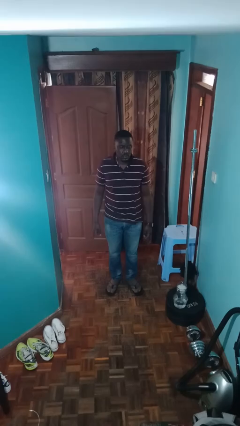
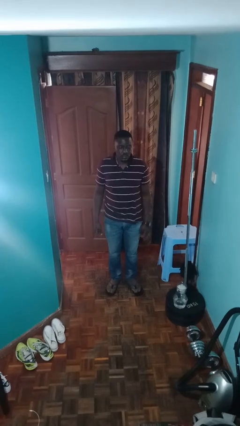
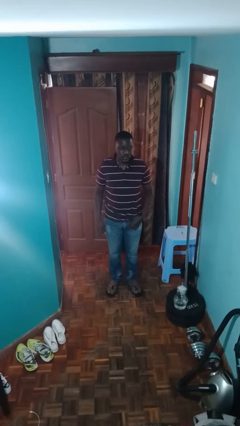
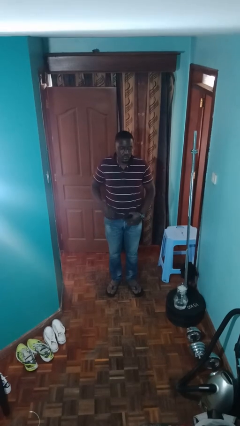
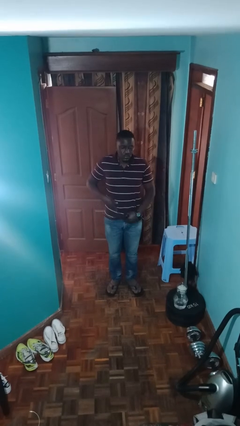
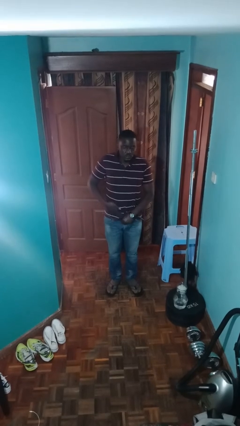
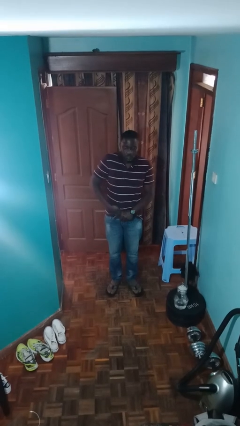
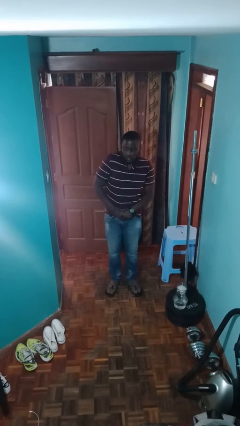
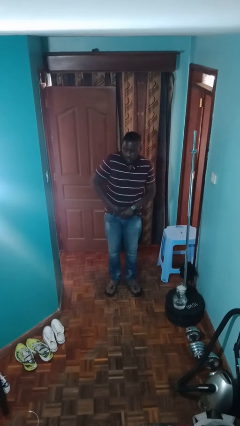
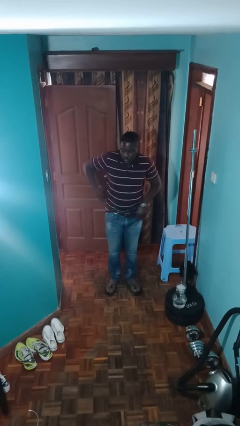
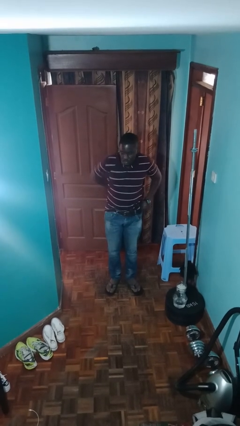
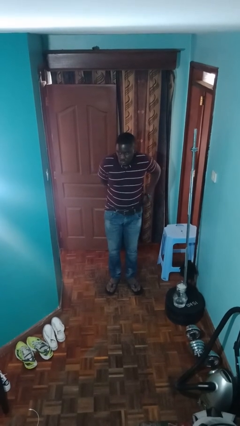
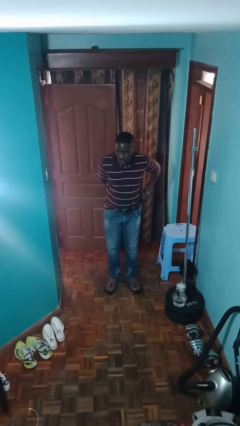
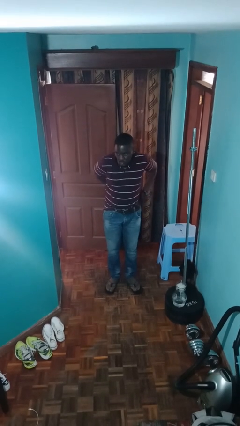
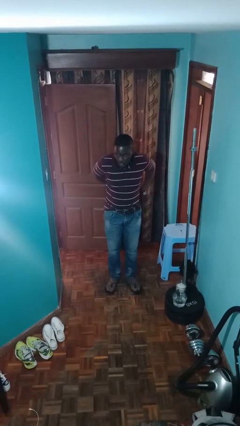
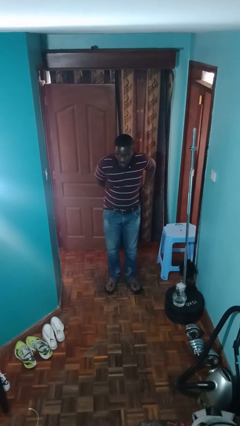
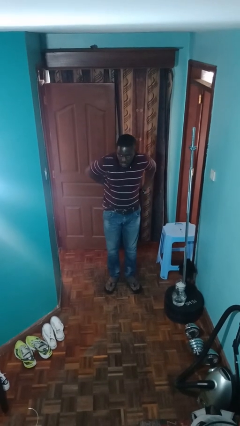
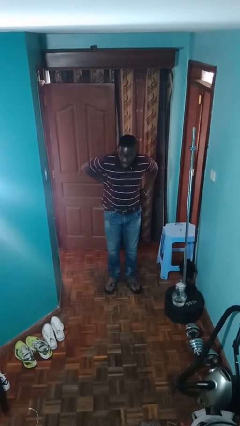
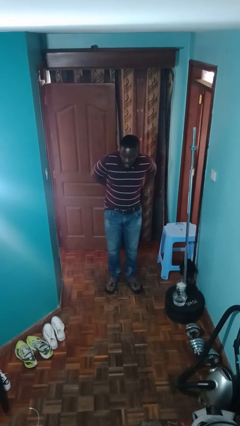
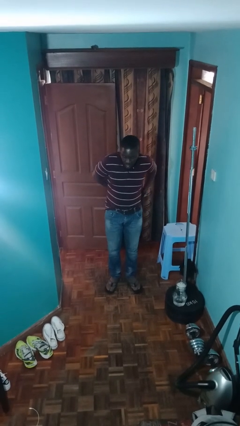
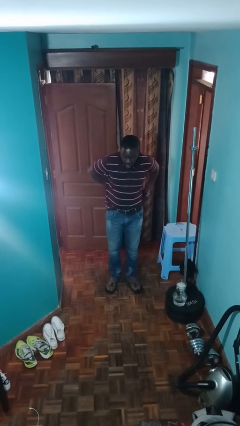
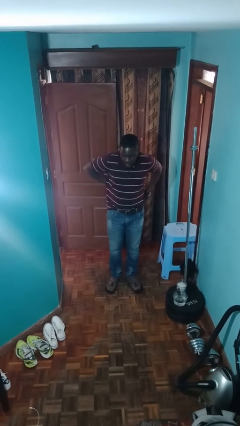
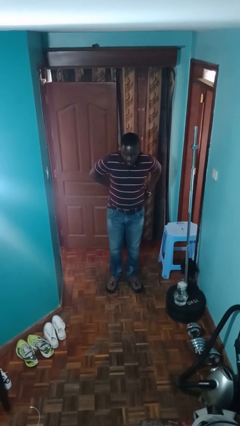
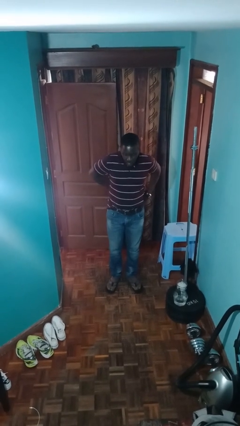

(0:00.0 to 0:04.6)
person tucks in shirt

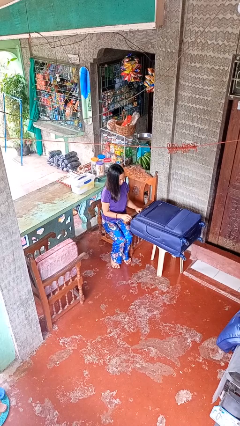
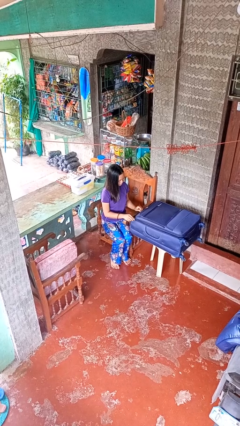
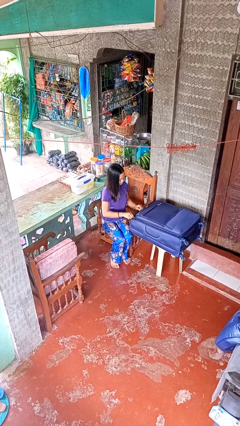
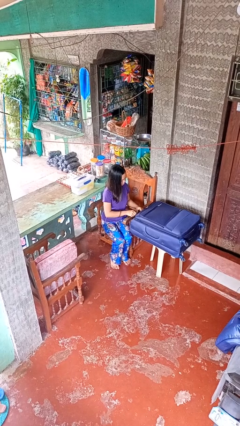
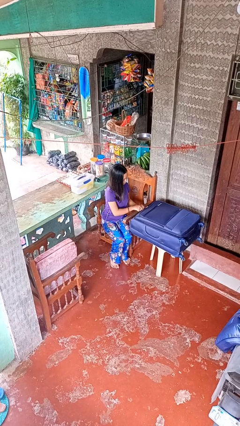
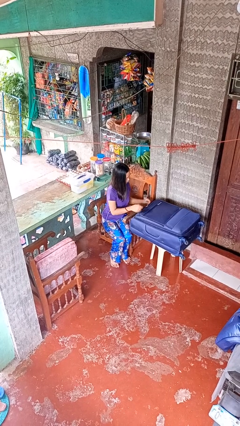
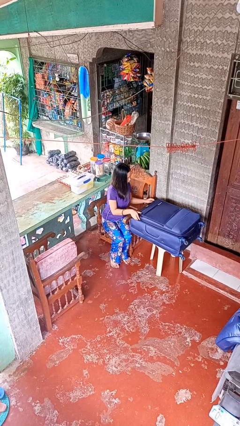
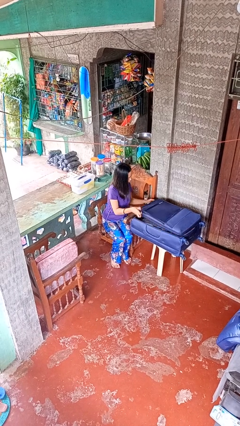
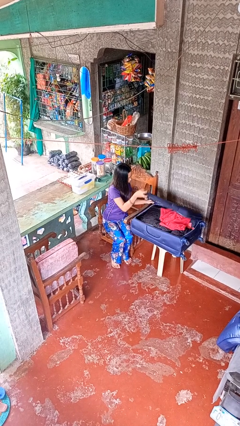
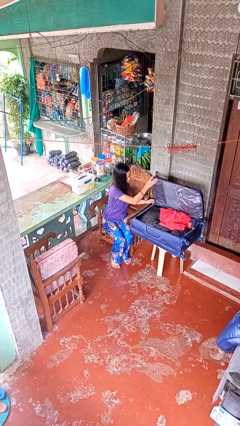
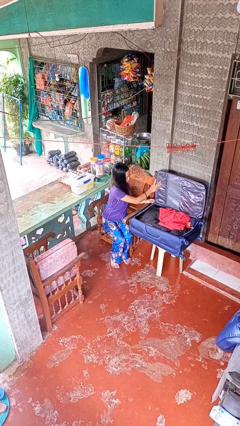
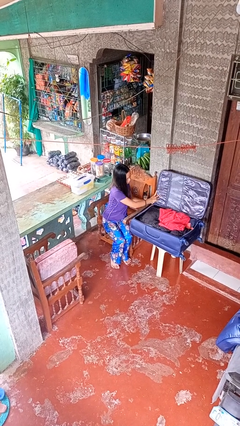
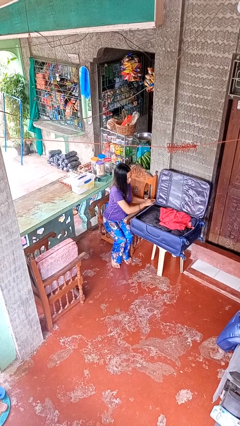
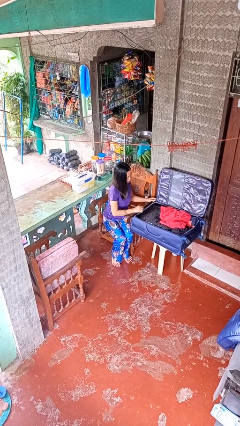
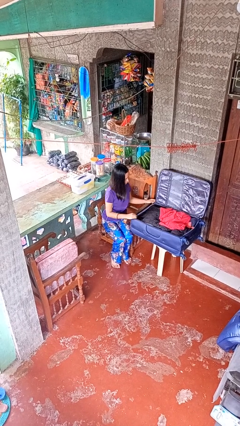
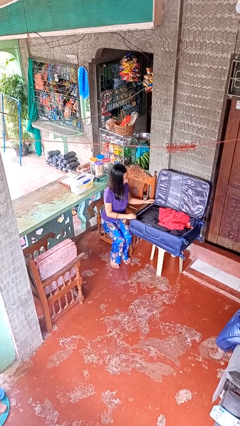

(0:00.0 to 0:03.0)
person opens suitcase

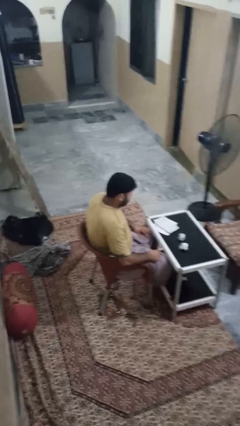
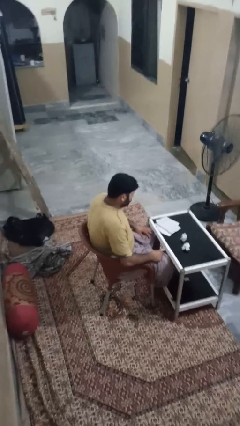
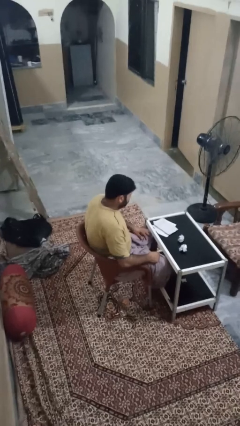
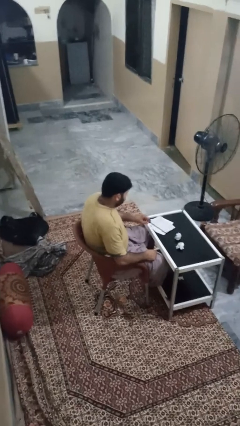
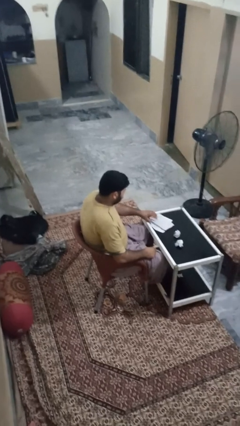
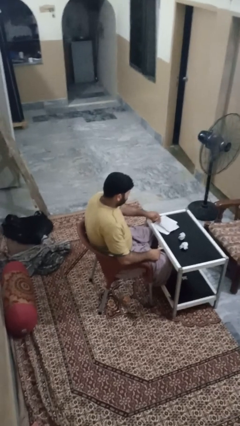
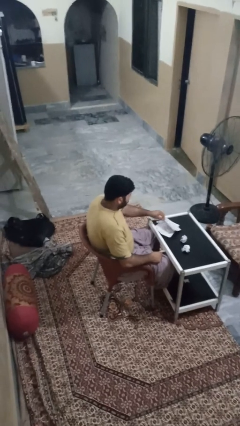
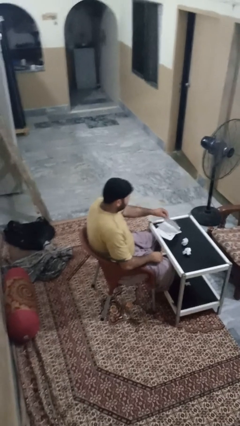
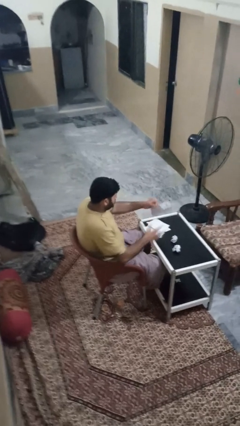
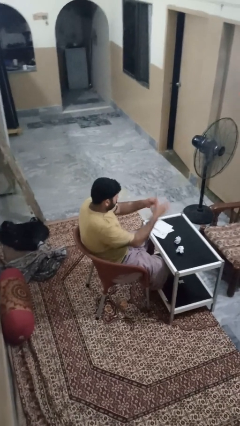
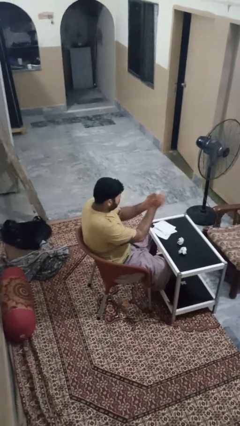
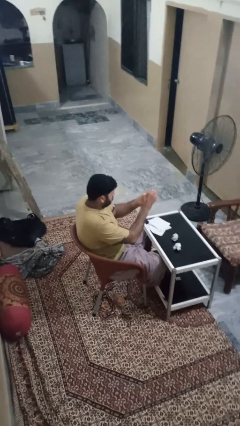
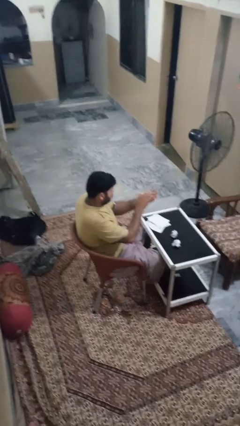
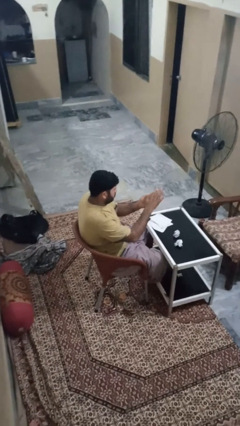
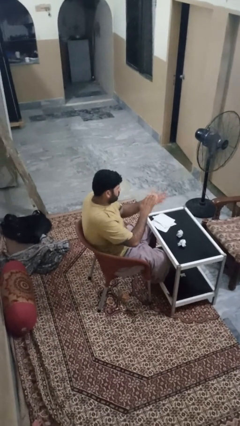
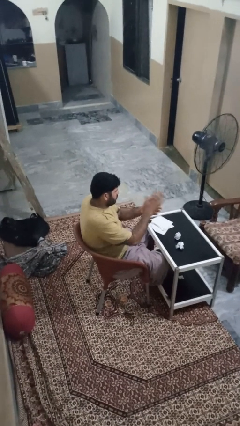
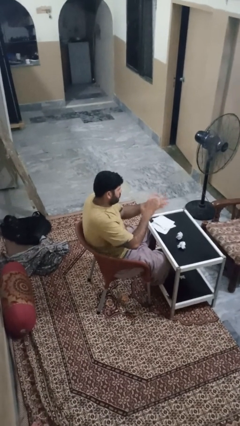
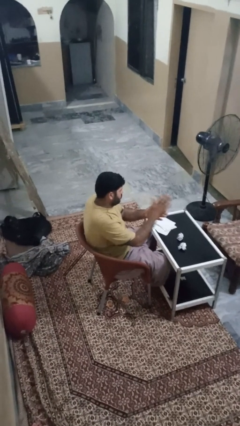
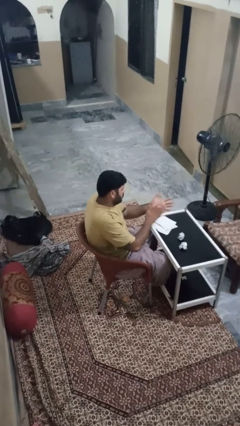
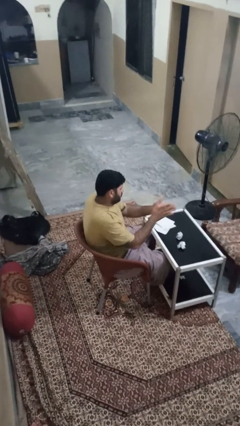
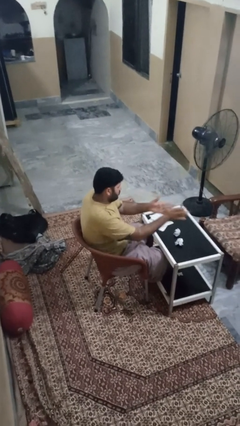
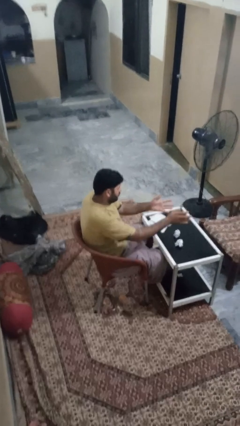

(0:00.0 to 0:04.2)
person crumples paper

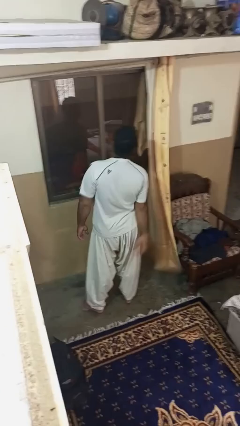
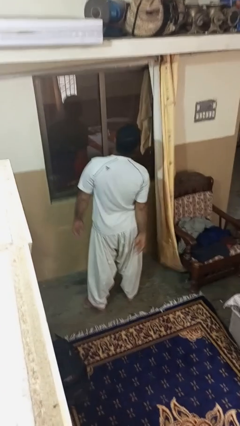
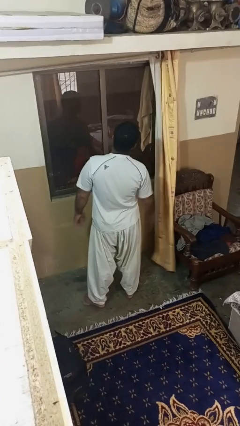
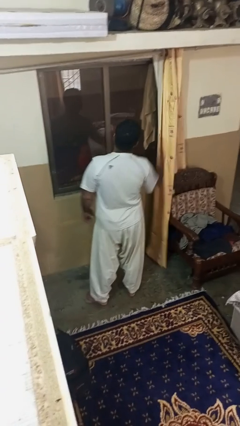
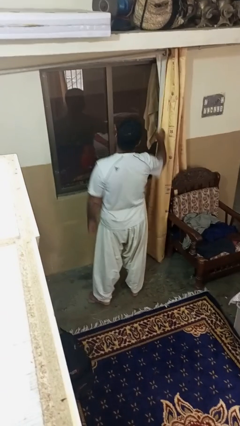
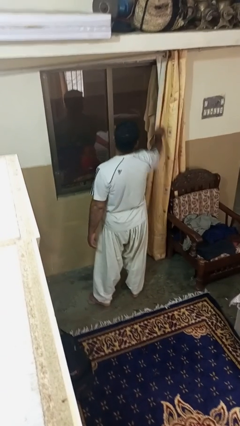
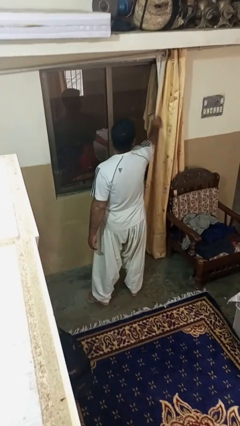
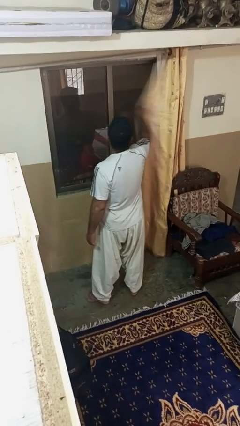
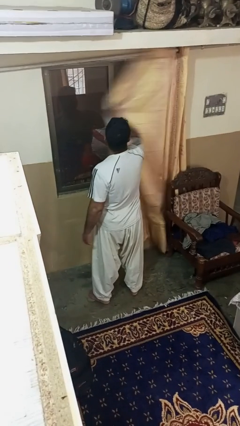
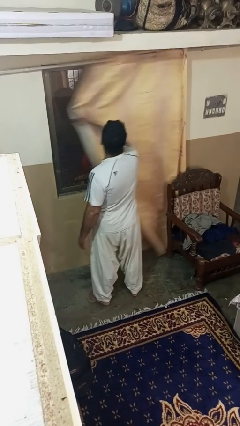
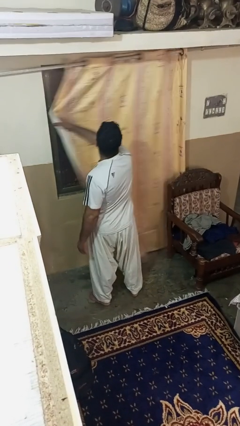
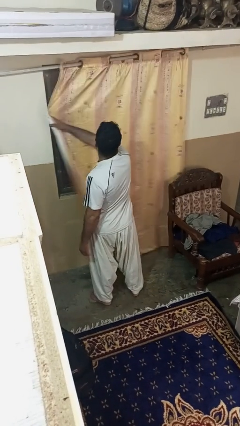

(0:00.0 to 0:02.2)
person closes curtains

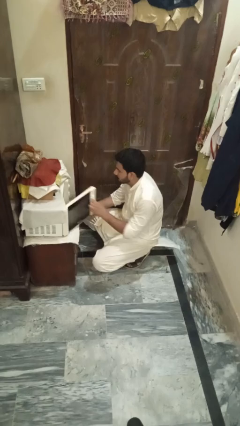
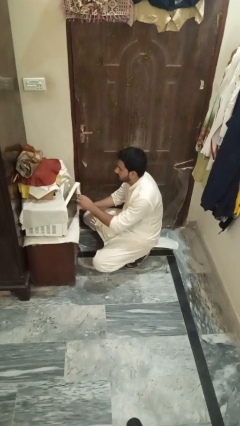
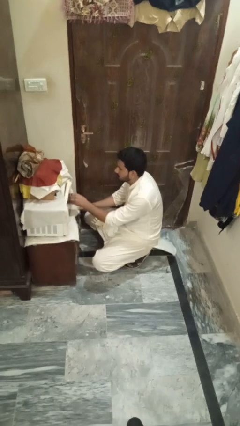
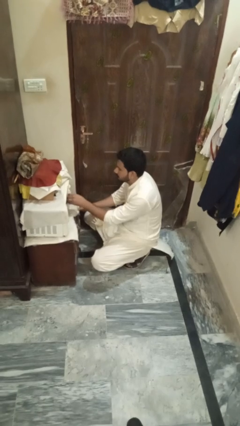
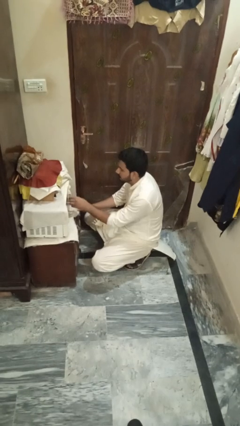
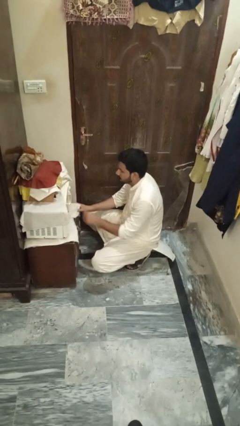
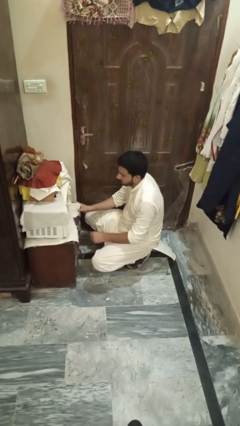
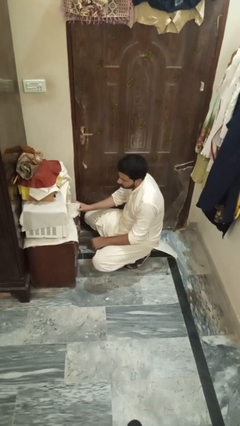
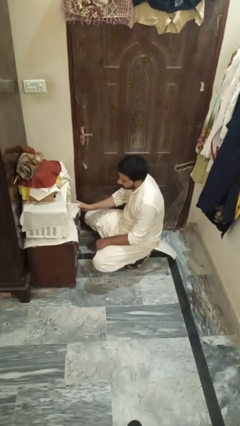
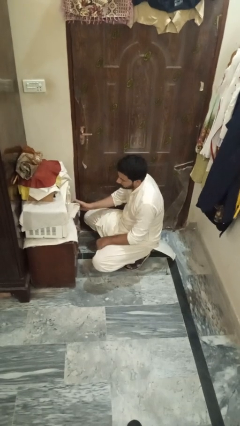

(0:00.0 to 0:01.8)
person closes microwave

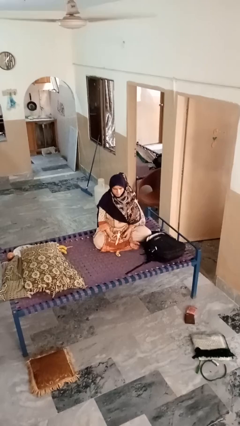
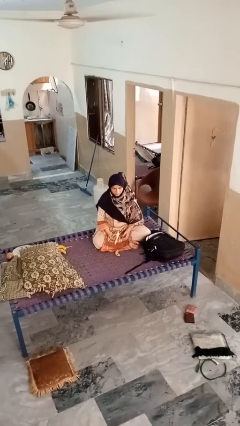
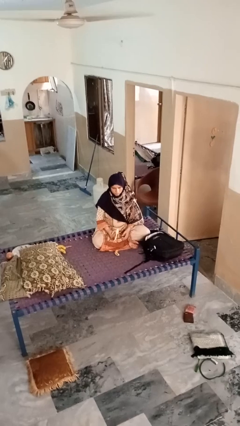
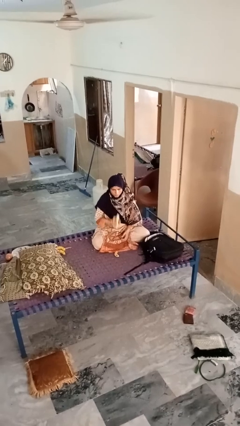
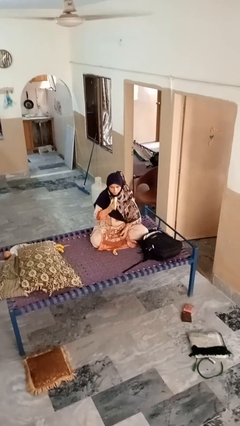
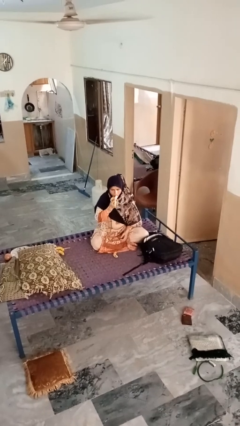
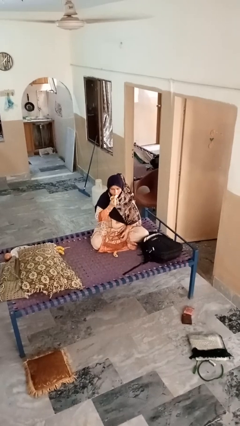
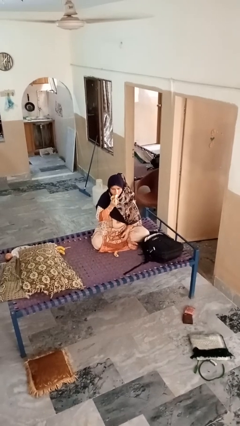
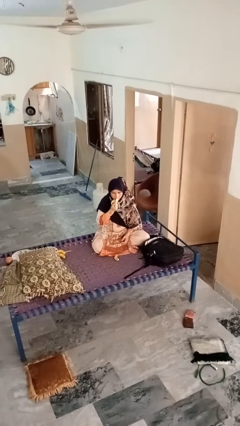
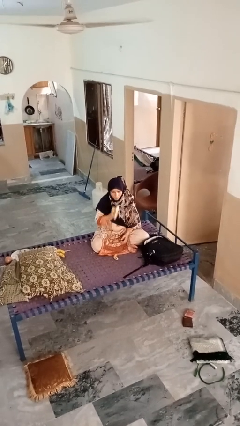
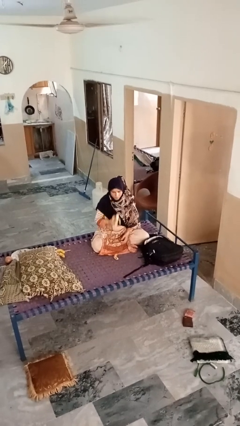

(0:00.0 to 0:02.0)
person eats banana
